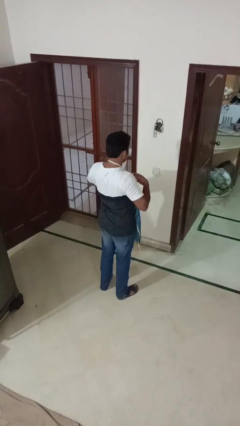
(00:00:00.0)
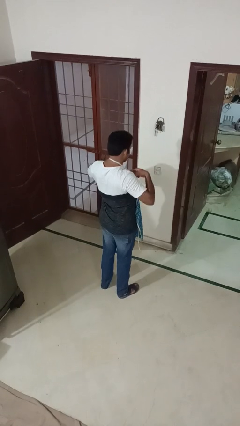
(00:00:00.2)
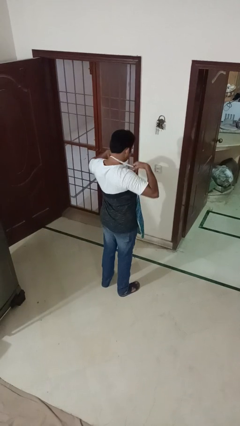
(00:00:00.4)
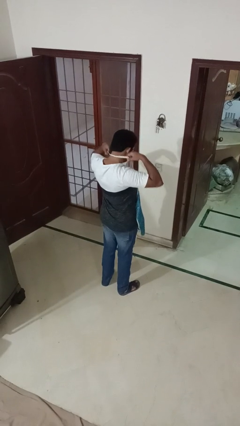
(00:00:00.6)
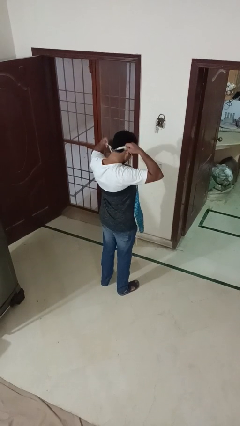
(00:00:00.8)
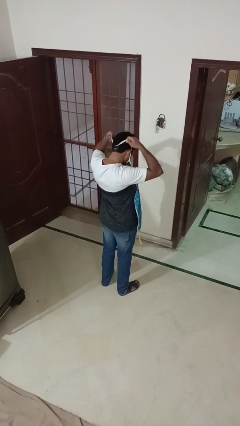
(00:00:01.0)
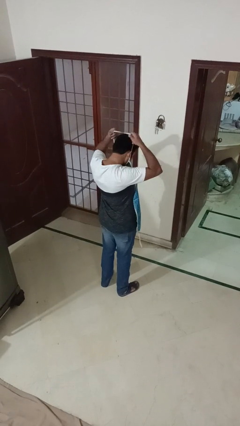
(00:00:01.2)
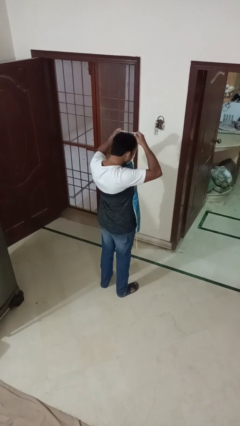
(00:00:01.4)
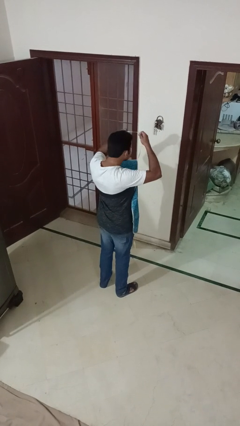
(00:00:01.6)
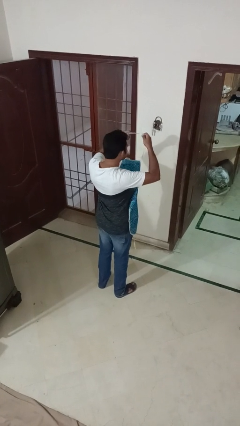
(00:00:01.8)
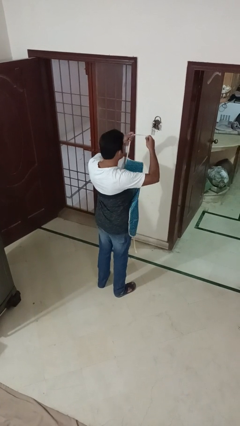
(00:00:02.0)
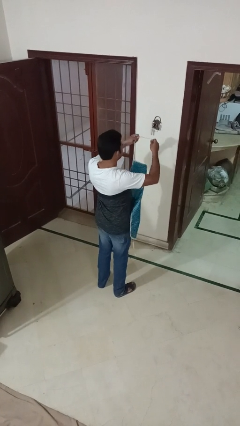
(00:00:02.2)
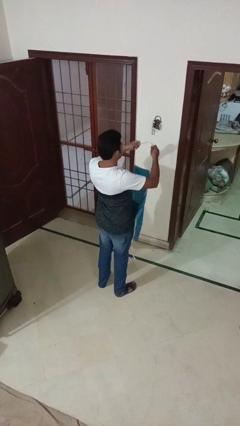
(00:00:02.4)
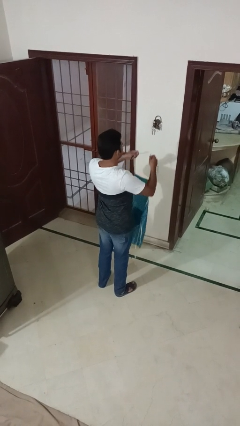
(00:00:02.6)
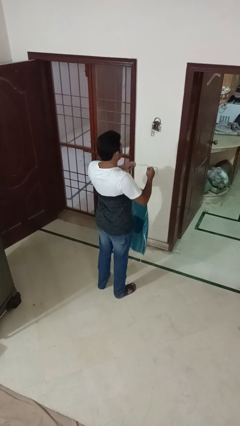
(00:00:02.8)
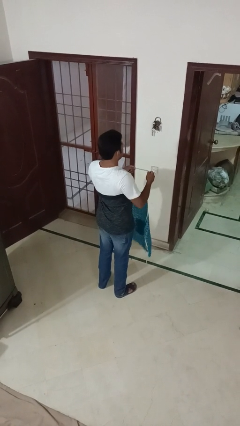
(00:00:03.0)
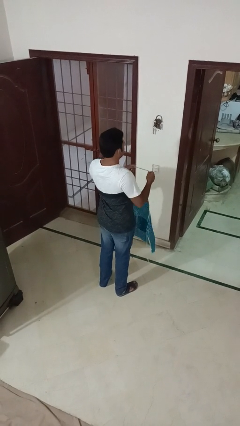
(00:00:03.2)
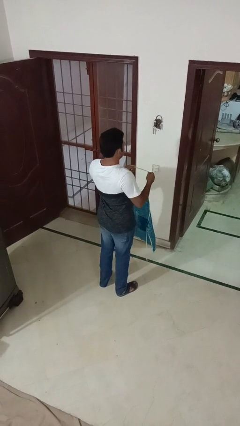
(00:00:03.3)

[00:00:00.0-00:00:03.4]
person takes off apron

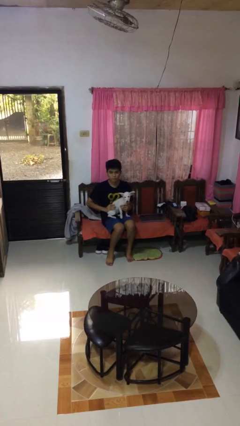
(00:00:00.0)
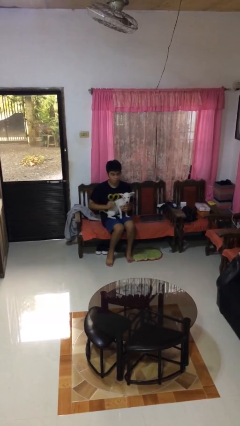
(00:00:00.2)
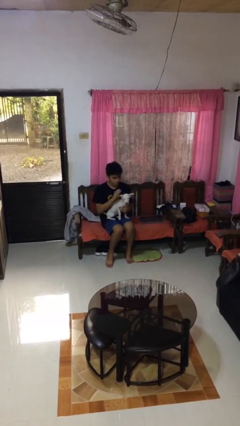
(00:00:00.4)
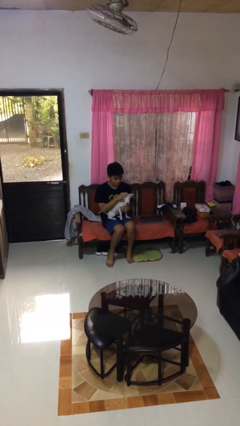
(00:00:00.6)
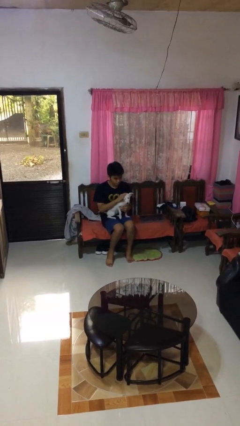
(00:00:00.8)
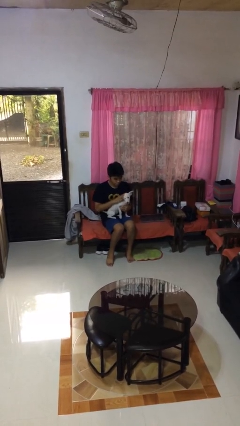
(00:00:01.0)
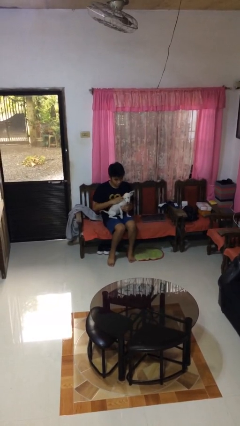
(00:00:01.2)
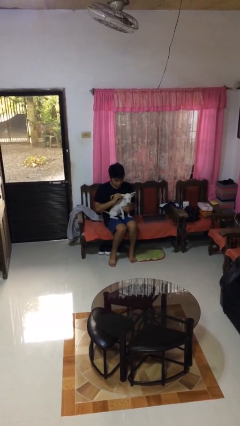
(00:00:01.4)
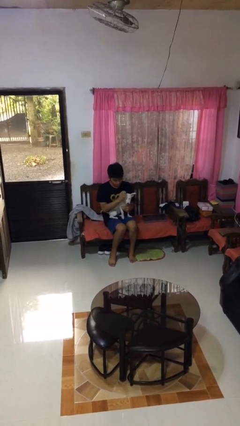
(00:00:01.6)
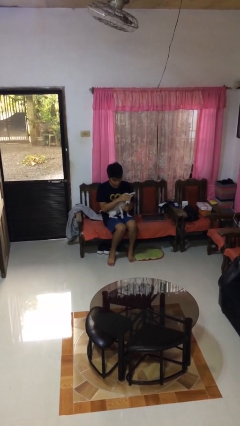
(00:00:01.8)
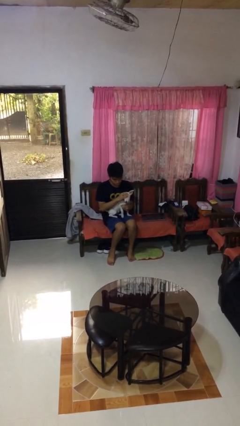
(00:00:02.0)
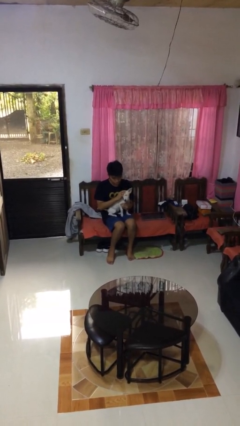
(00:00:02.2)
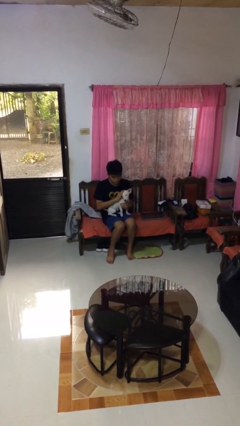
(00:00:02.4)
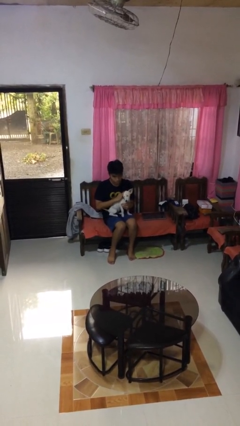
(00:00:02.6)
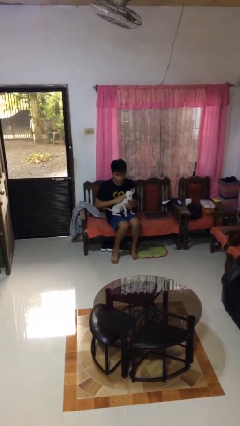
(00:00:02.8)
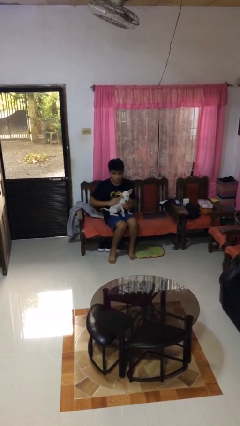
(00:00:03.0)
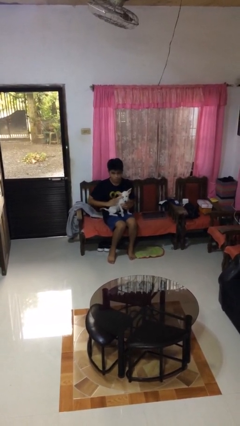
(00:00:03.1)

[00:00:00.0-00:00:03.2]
person pets dog

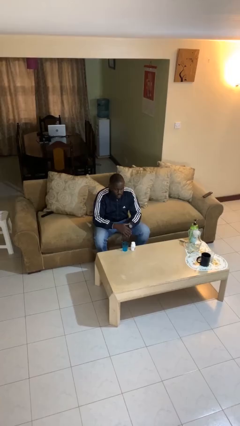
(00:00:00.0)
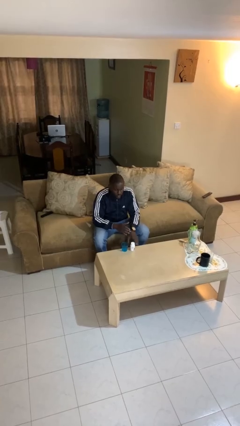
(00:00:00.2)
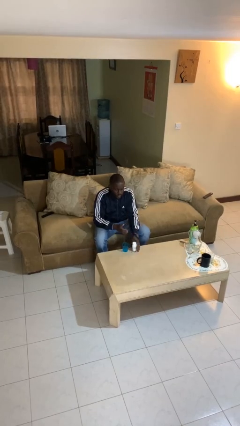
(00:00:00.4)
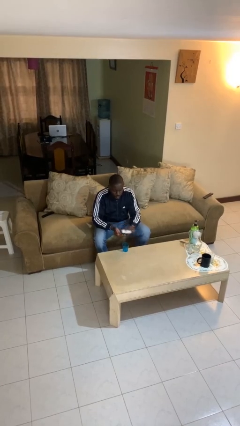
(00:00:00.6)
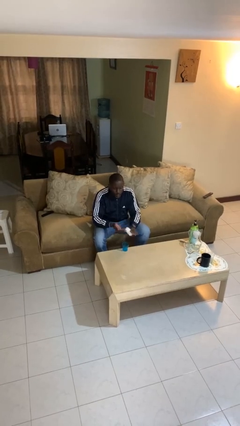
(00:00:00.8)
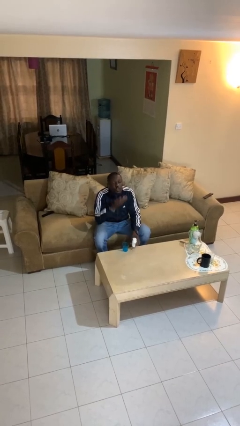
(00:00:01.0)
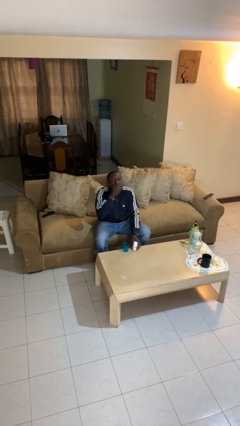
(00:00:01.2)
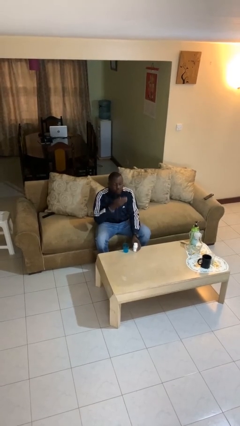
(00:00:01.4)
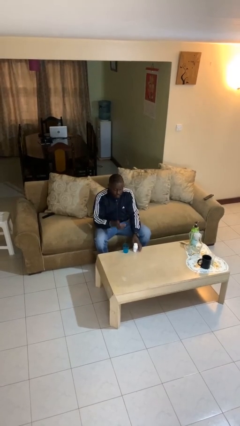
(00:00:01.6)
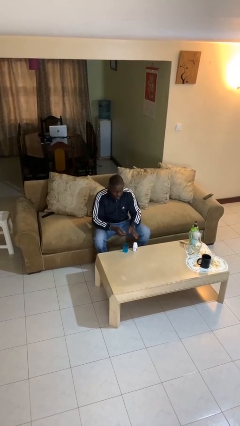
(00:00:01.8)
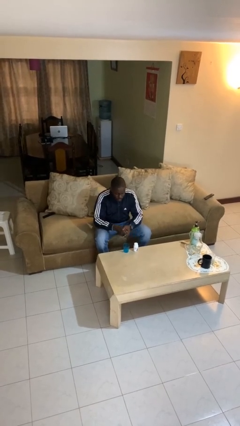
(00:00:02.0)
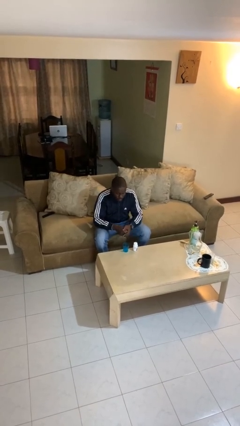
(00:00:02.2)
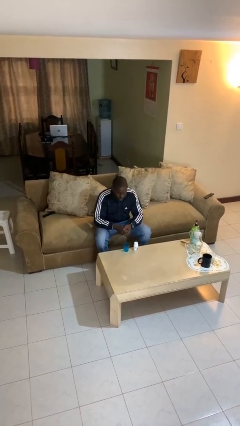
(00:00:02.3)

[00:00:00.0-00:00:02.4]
person takes medicine pills

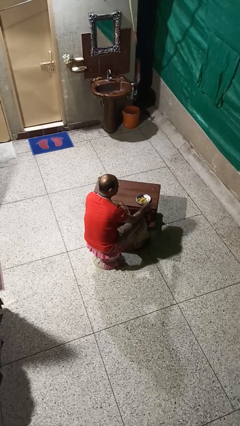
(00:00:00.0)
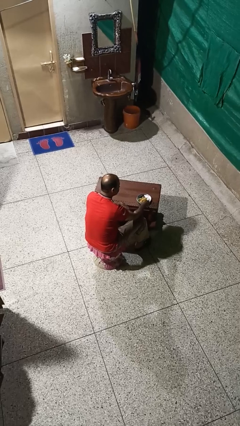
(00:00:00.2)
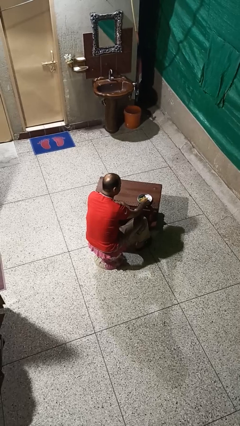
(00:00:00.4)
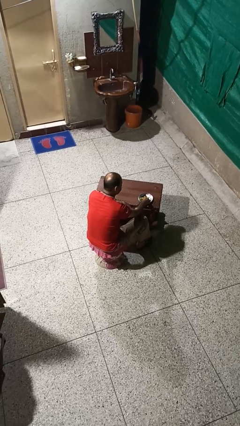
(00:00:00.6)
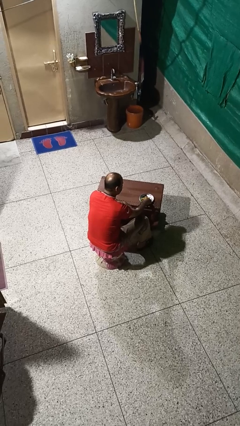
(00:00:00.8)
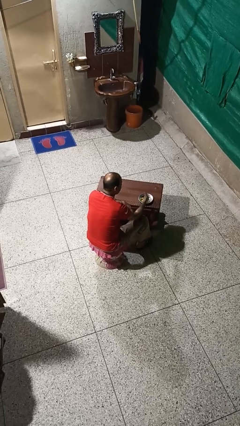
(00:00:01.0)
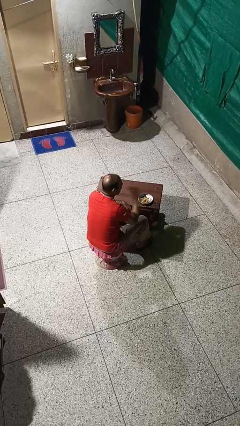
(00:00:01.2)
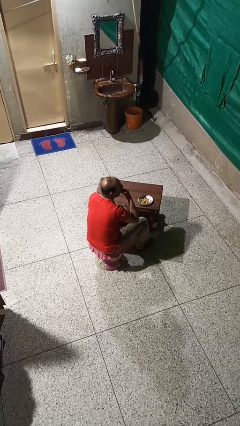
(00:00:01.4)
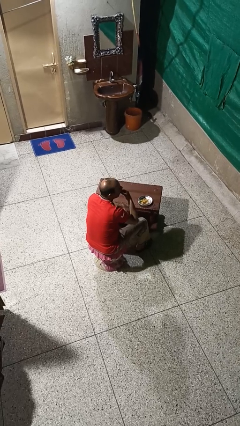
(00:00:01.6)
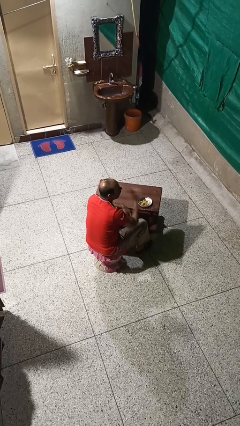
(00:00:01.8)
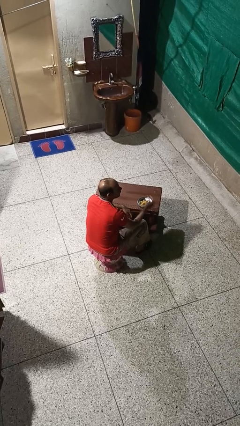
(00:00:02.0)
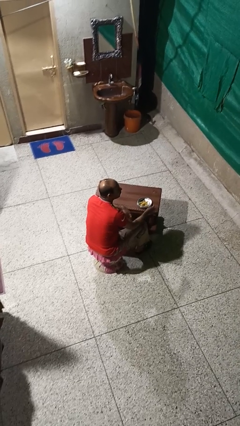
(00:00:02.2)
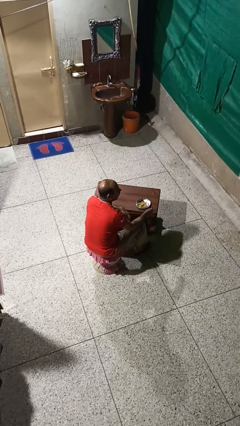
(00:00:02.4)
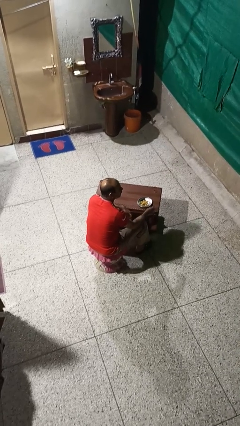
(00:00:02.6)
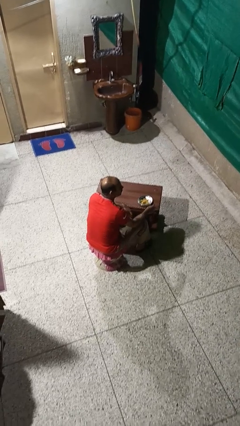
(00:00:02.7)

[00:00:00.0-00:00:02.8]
person eats with hands

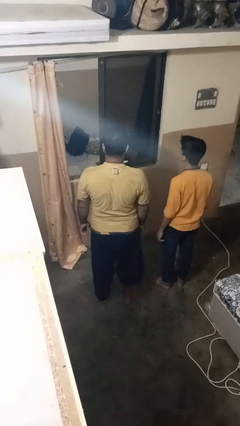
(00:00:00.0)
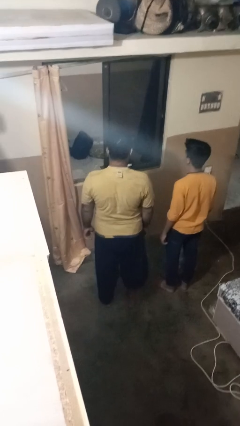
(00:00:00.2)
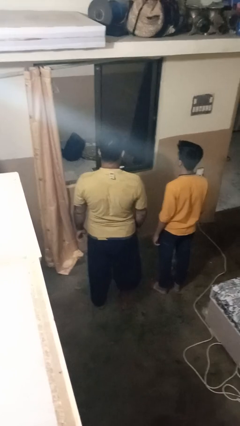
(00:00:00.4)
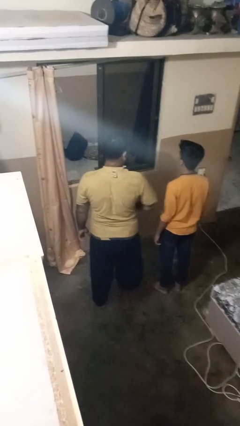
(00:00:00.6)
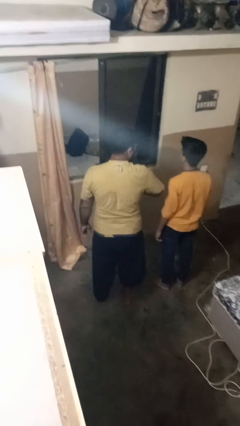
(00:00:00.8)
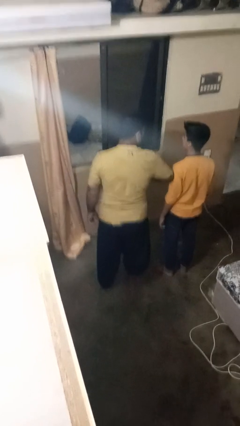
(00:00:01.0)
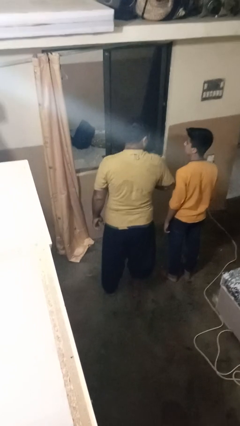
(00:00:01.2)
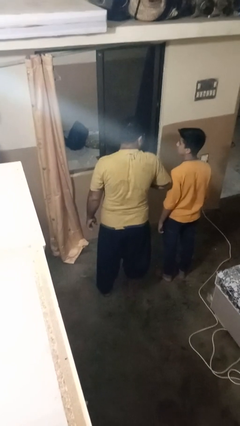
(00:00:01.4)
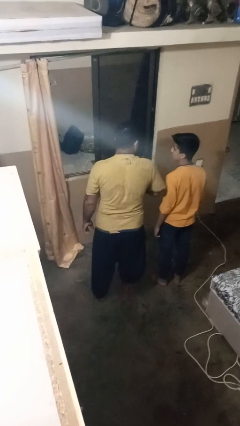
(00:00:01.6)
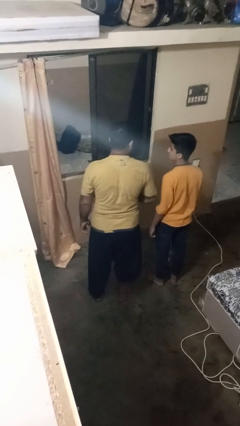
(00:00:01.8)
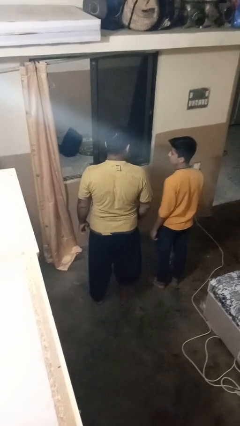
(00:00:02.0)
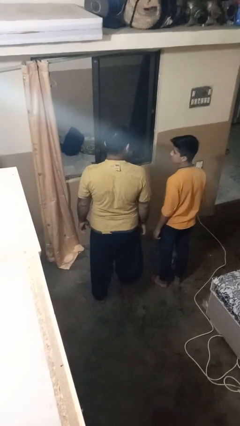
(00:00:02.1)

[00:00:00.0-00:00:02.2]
person nudges person with elbow

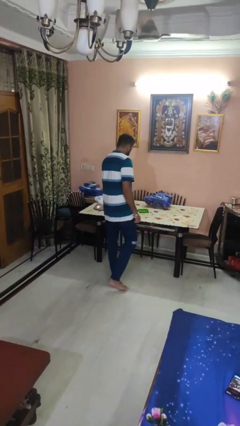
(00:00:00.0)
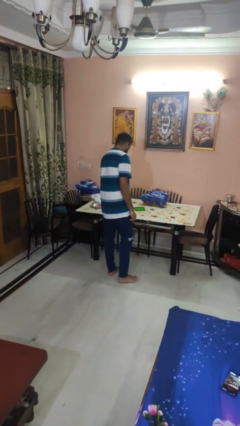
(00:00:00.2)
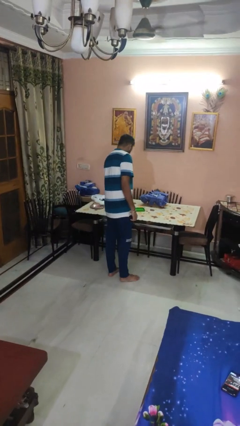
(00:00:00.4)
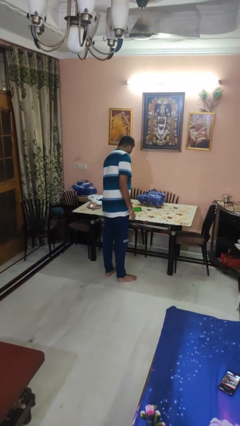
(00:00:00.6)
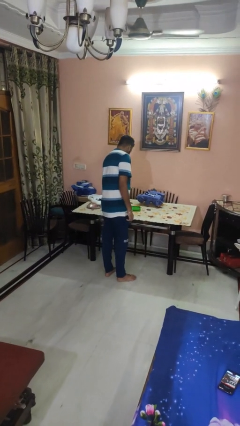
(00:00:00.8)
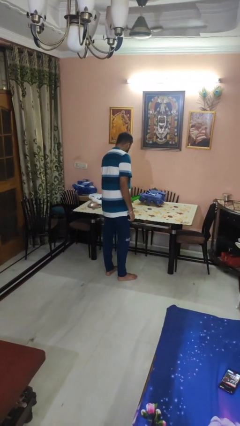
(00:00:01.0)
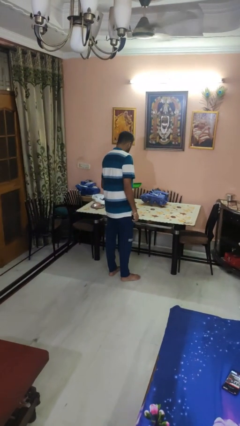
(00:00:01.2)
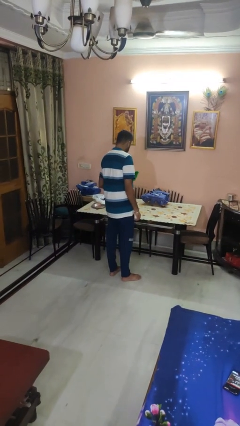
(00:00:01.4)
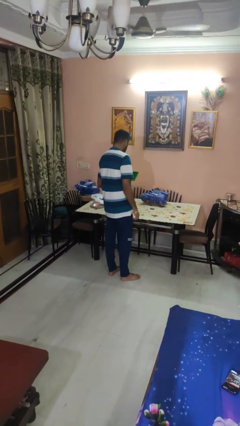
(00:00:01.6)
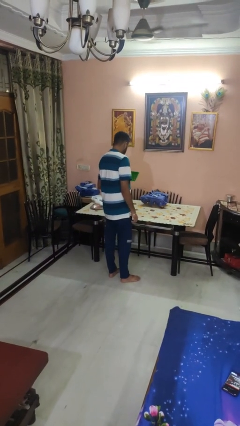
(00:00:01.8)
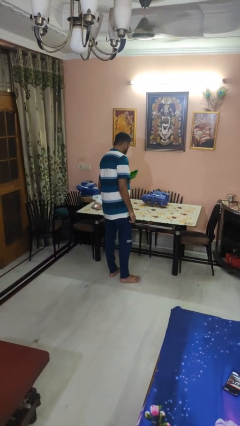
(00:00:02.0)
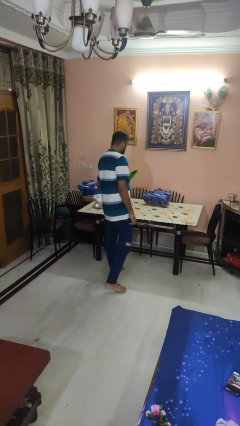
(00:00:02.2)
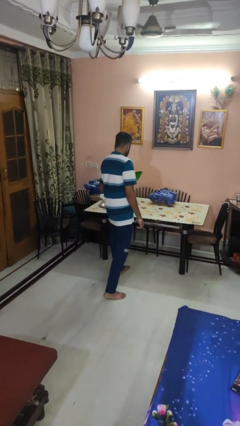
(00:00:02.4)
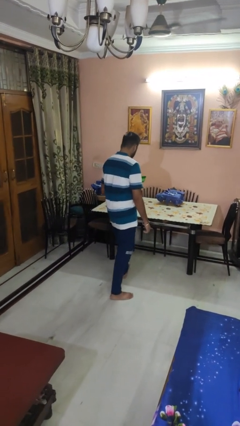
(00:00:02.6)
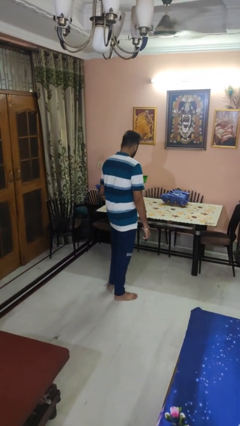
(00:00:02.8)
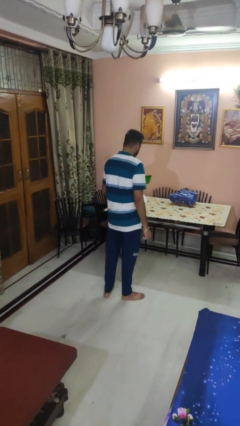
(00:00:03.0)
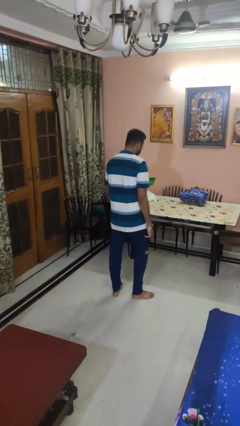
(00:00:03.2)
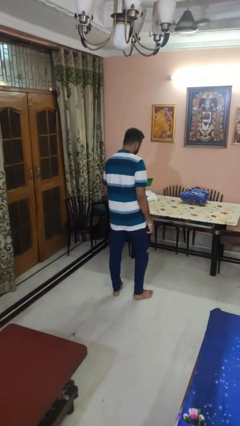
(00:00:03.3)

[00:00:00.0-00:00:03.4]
person picks up object from table
